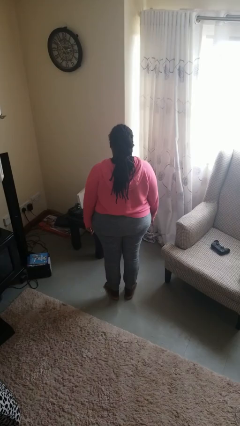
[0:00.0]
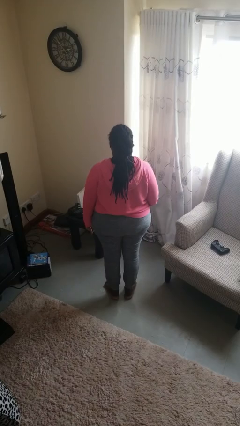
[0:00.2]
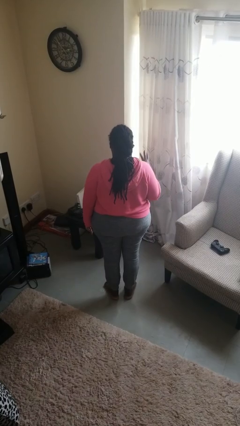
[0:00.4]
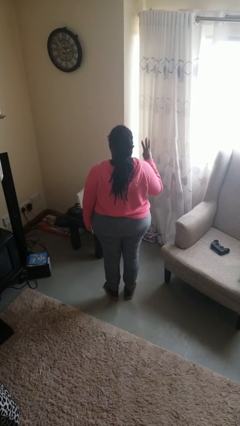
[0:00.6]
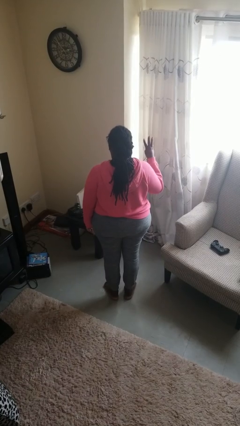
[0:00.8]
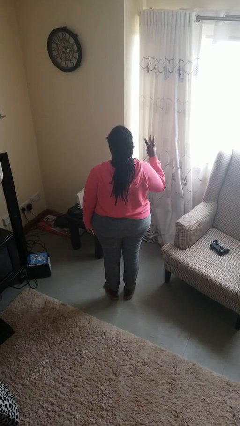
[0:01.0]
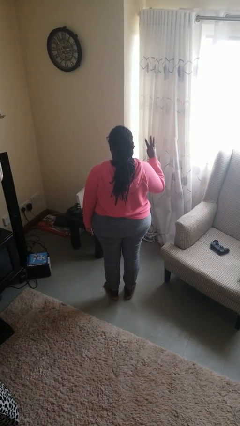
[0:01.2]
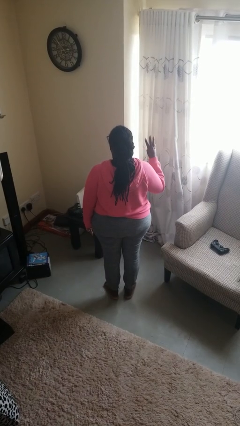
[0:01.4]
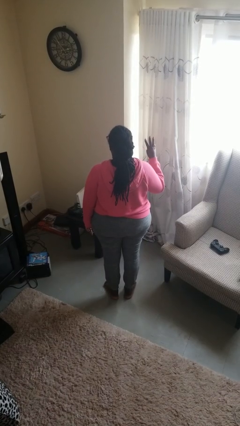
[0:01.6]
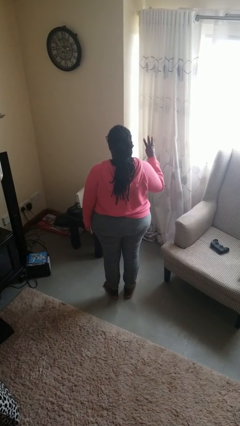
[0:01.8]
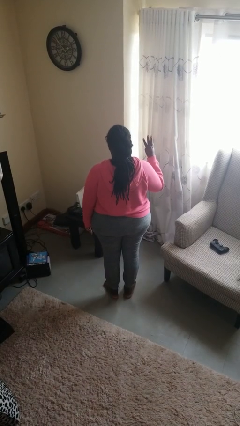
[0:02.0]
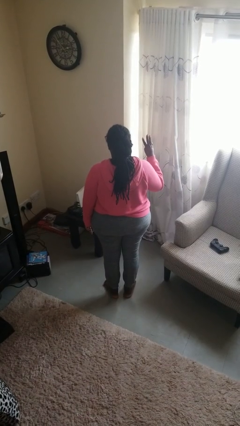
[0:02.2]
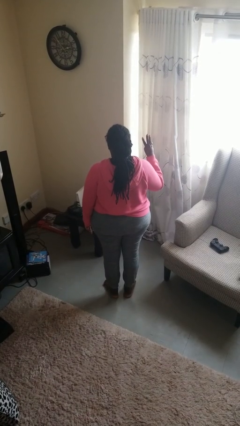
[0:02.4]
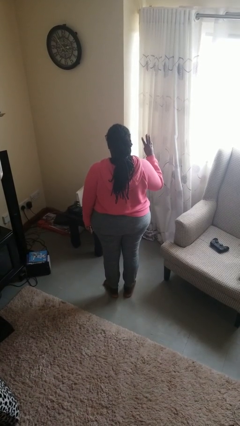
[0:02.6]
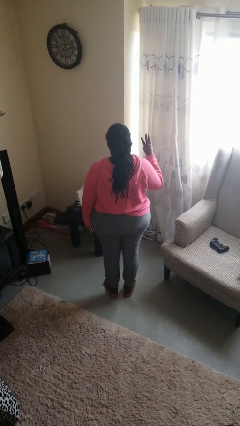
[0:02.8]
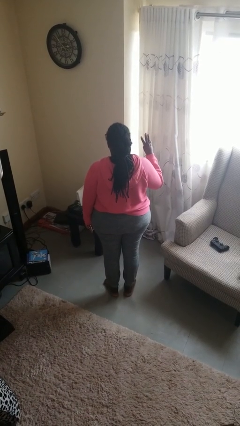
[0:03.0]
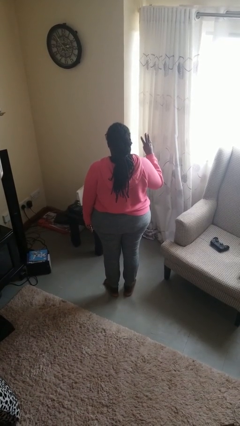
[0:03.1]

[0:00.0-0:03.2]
person gestures number three

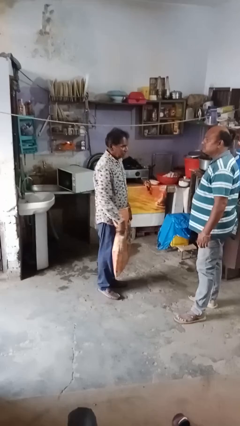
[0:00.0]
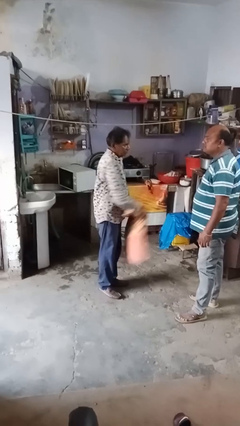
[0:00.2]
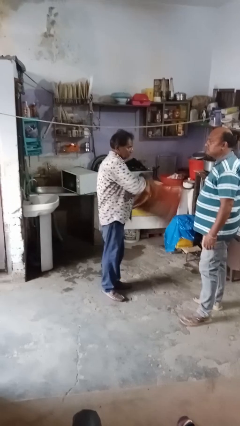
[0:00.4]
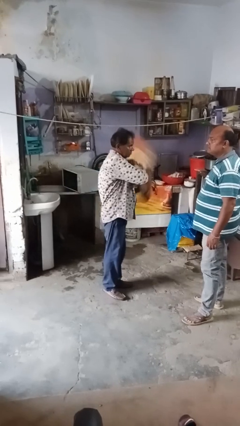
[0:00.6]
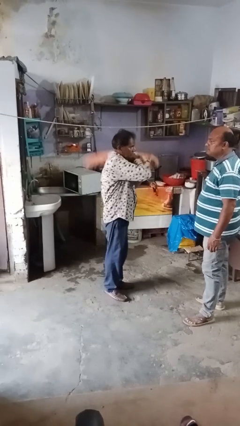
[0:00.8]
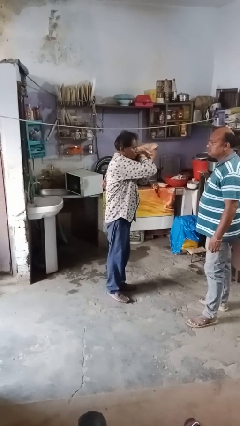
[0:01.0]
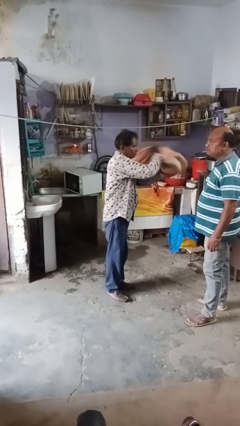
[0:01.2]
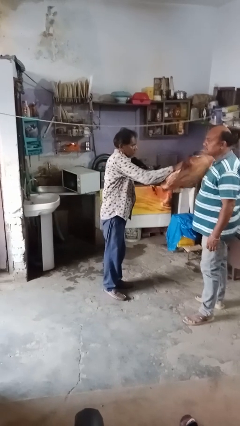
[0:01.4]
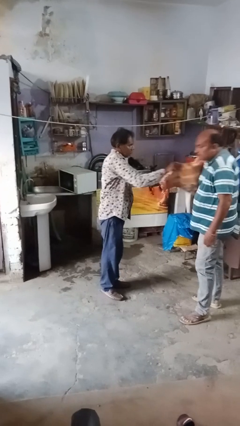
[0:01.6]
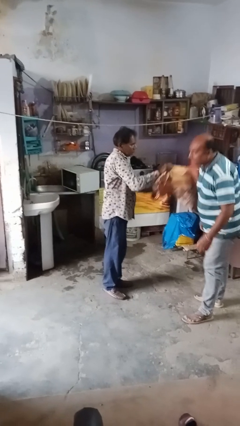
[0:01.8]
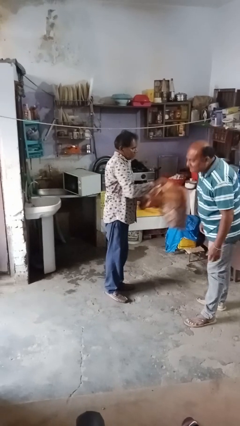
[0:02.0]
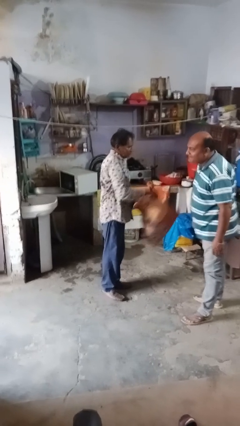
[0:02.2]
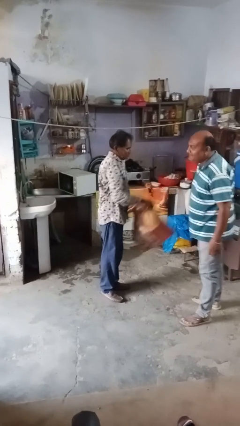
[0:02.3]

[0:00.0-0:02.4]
person hits person with pillow

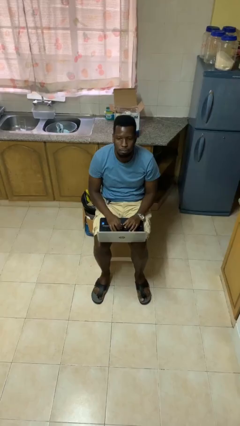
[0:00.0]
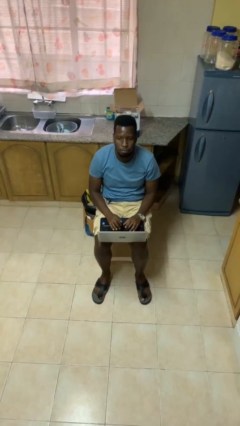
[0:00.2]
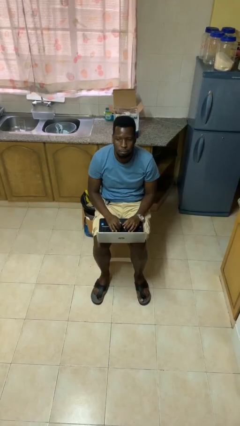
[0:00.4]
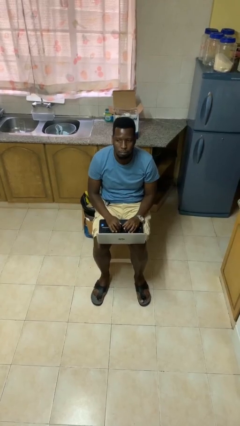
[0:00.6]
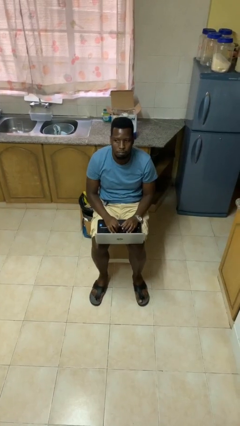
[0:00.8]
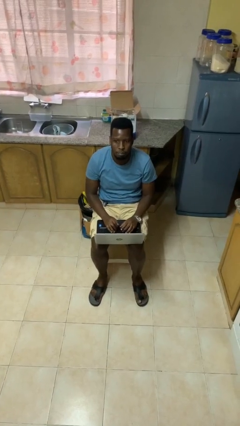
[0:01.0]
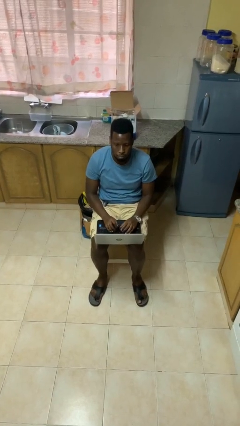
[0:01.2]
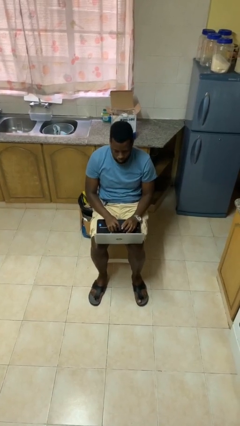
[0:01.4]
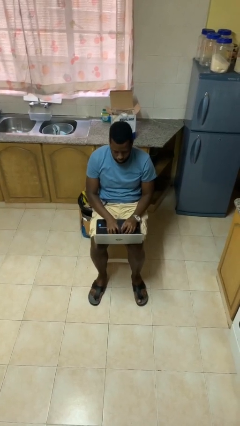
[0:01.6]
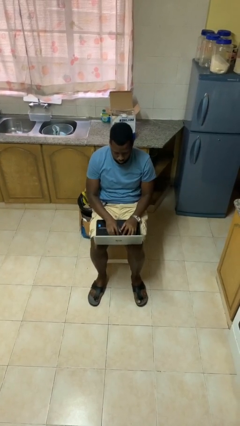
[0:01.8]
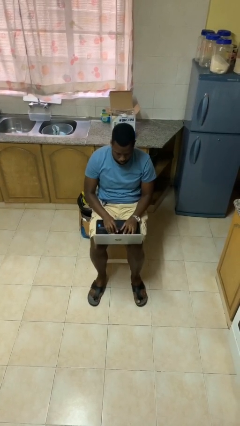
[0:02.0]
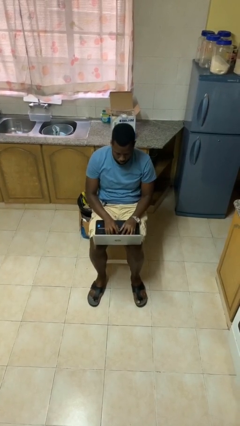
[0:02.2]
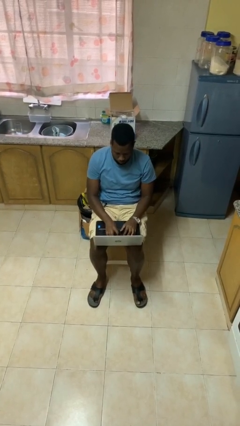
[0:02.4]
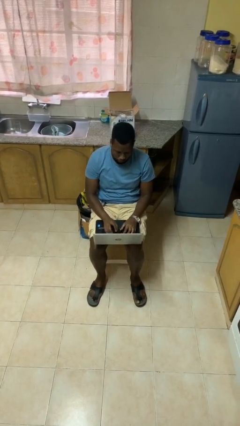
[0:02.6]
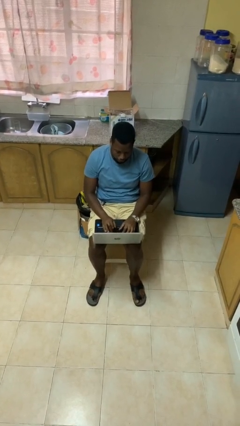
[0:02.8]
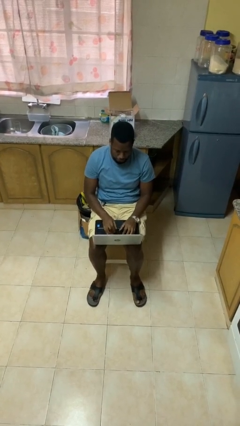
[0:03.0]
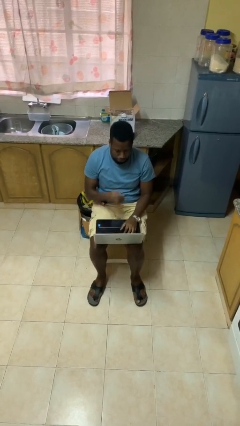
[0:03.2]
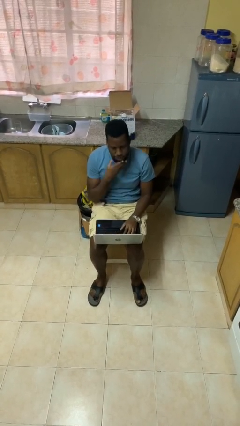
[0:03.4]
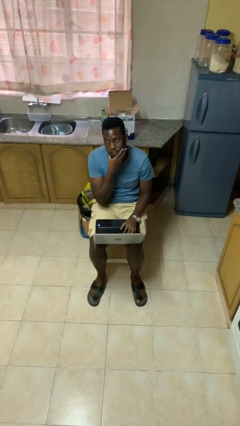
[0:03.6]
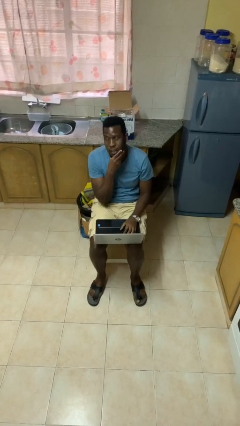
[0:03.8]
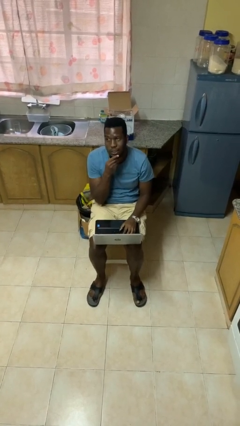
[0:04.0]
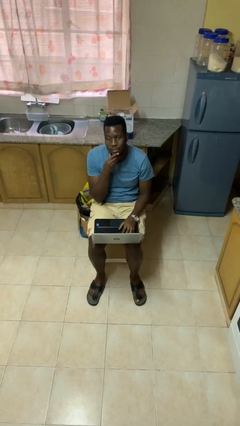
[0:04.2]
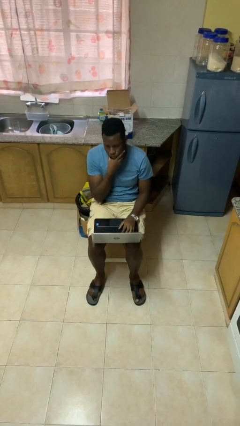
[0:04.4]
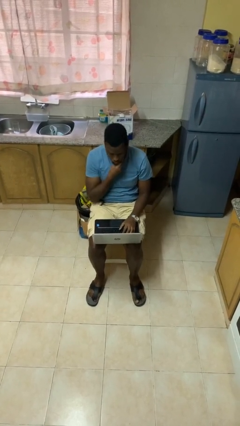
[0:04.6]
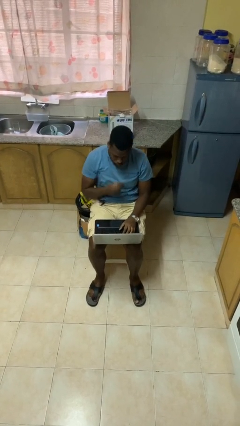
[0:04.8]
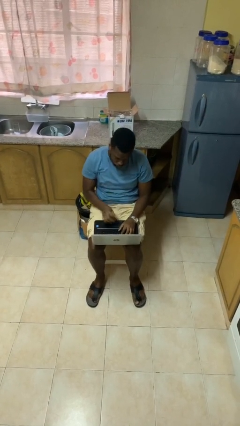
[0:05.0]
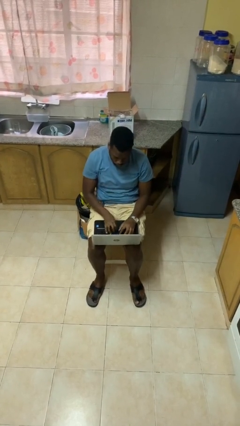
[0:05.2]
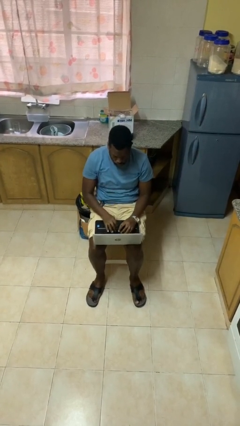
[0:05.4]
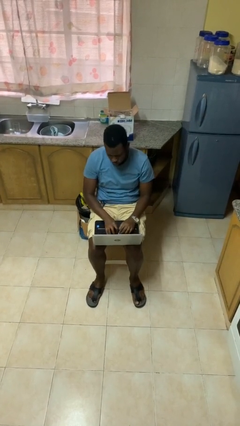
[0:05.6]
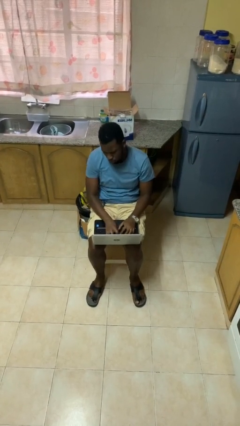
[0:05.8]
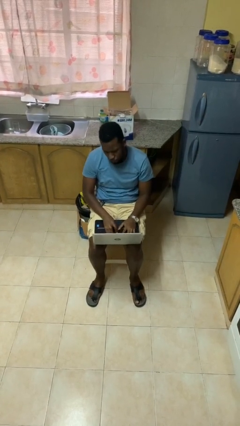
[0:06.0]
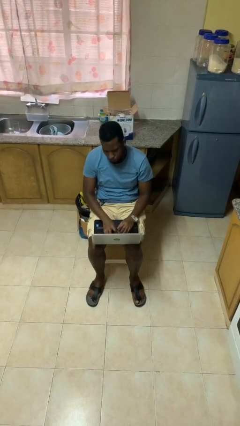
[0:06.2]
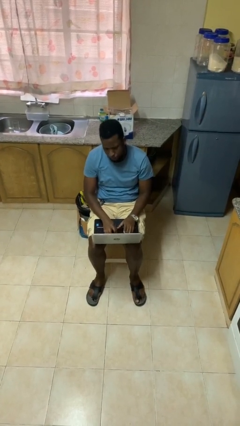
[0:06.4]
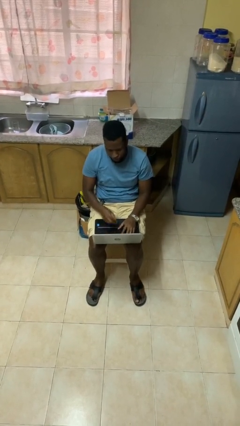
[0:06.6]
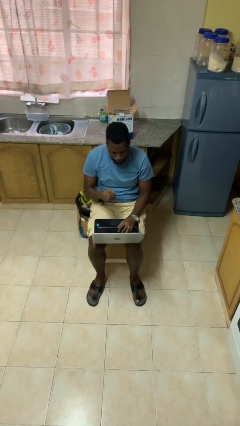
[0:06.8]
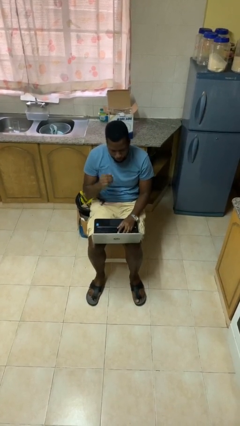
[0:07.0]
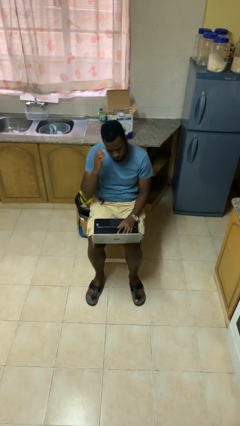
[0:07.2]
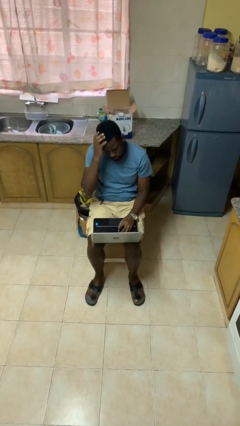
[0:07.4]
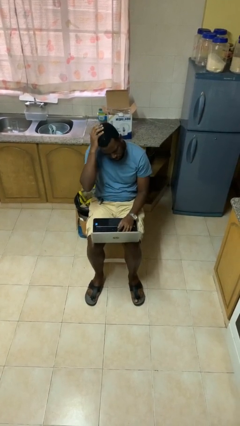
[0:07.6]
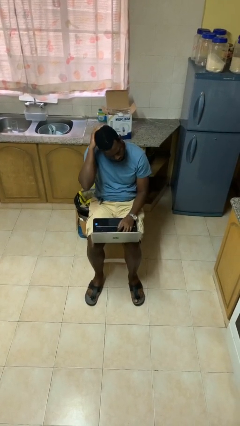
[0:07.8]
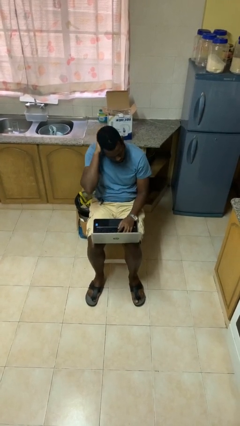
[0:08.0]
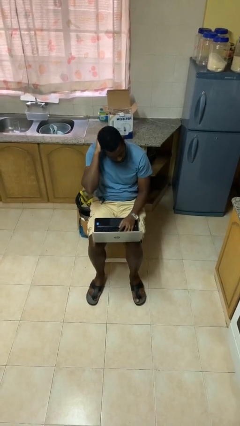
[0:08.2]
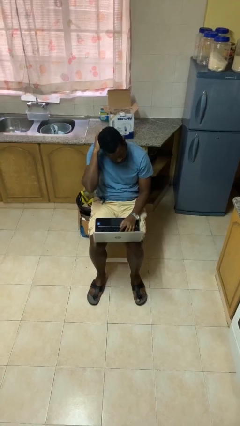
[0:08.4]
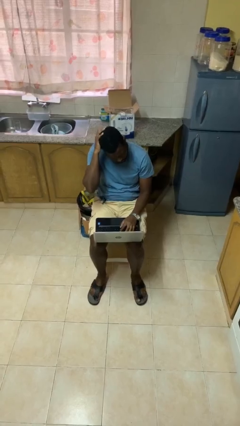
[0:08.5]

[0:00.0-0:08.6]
person interacts with laptop

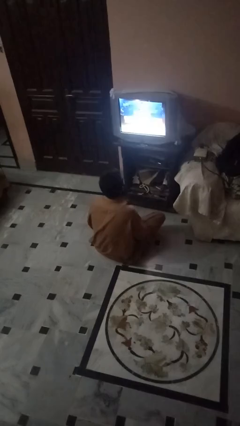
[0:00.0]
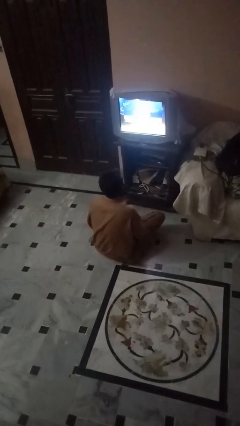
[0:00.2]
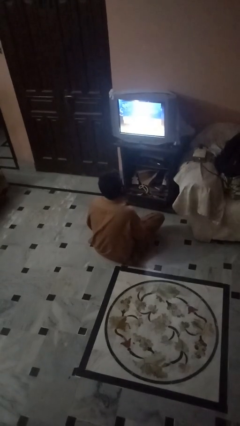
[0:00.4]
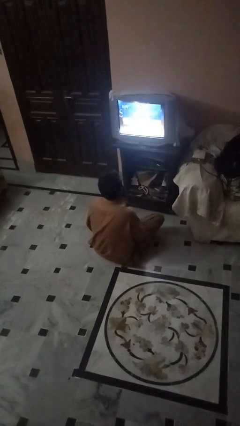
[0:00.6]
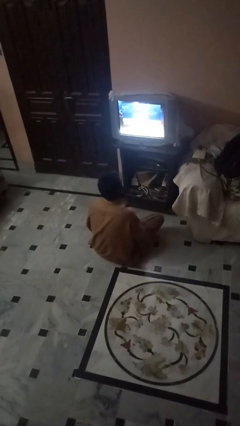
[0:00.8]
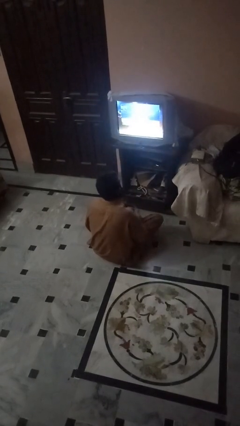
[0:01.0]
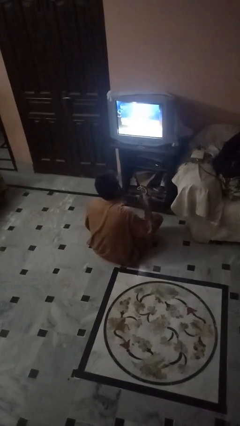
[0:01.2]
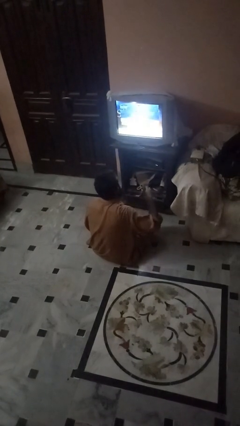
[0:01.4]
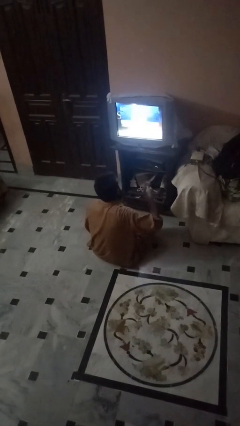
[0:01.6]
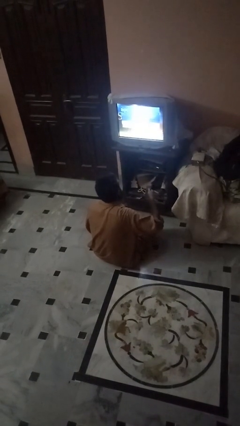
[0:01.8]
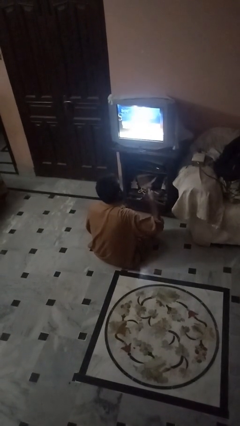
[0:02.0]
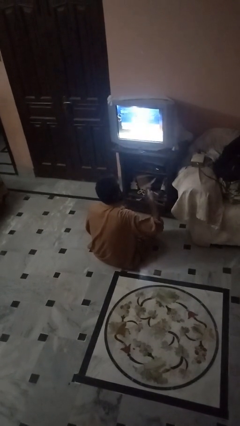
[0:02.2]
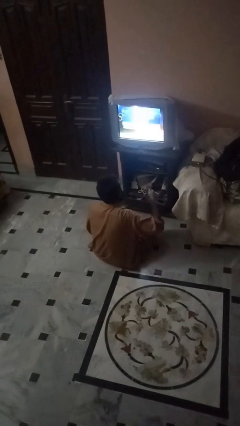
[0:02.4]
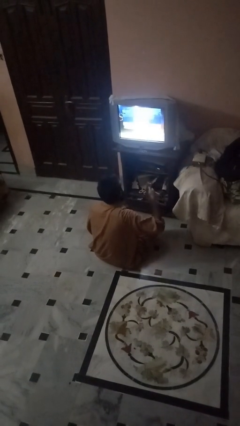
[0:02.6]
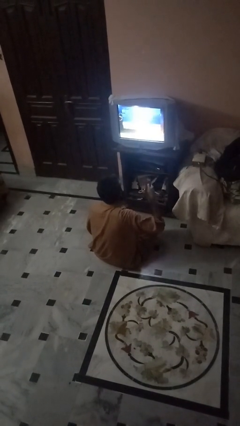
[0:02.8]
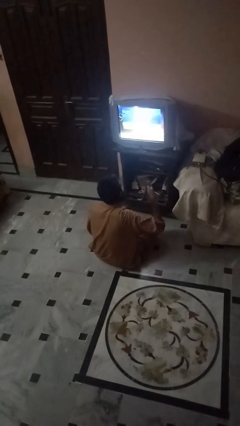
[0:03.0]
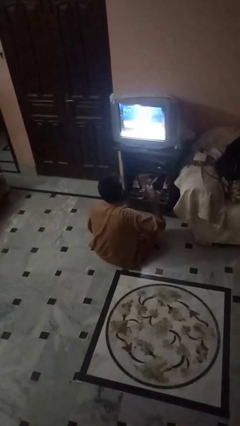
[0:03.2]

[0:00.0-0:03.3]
person uses television remote
